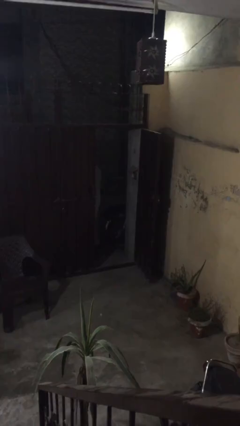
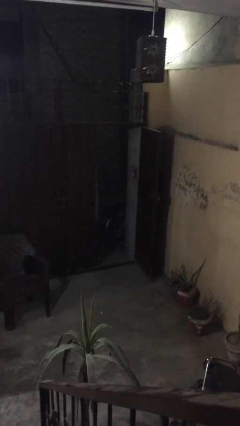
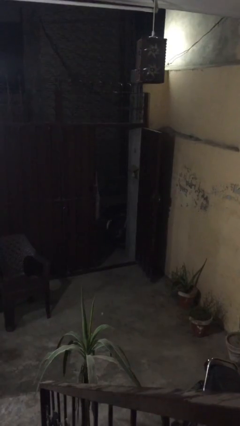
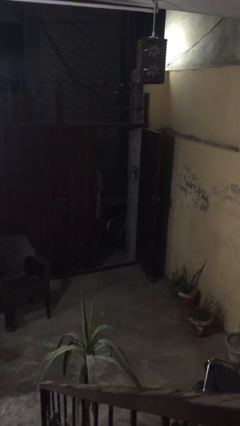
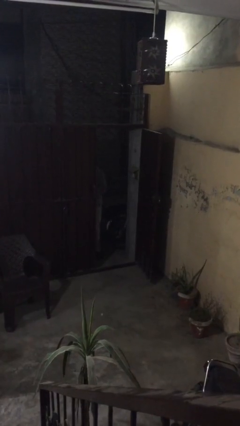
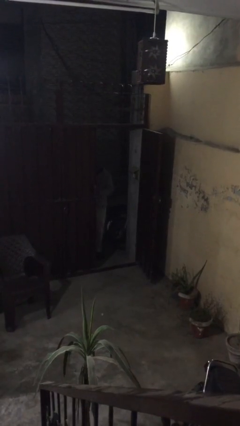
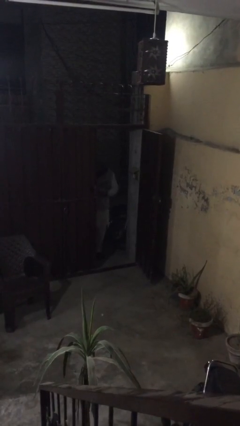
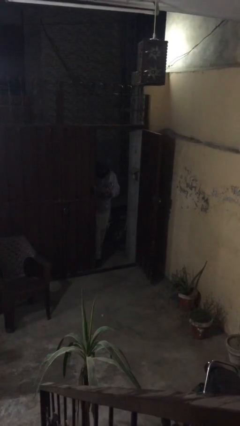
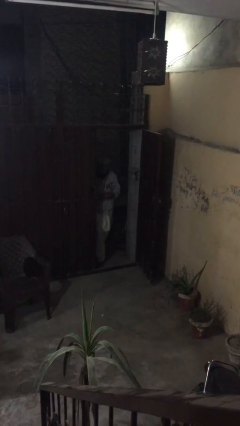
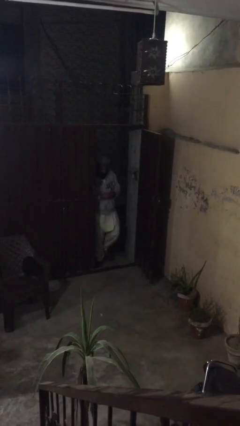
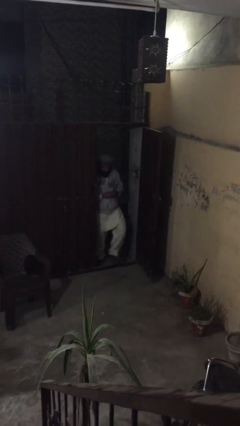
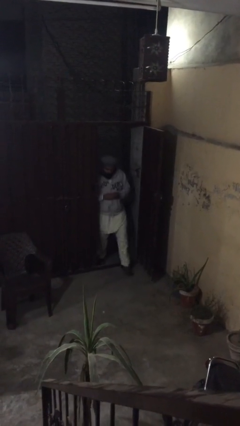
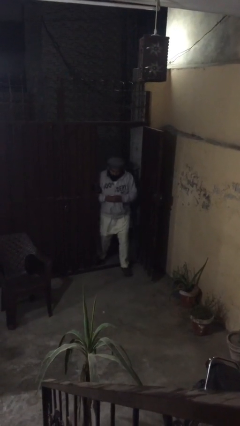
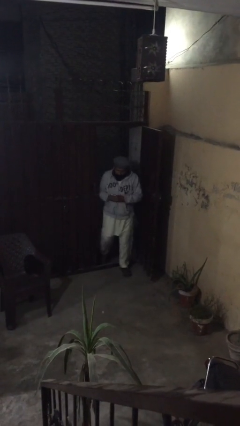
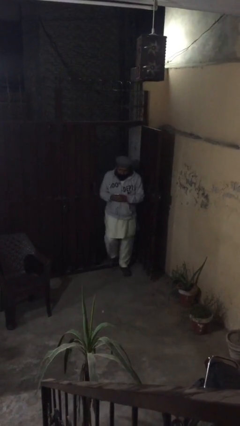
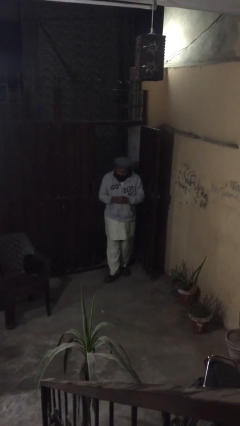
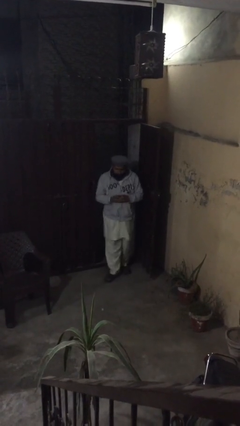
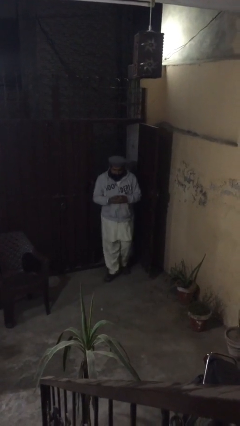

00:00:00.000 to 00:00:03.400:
person enters scene through structure

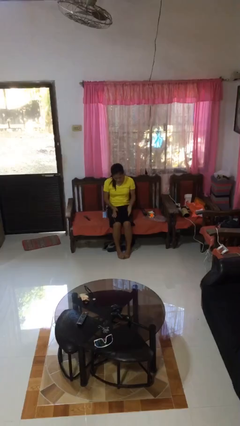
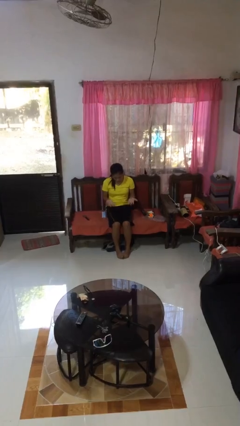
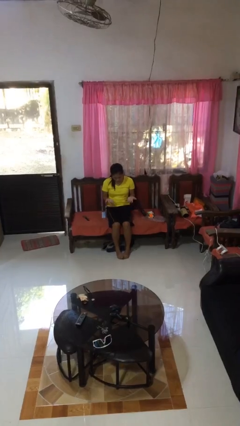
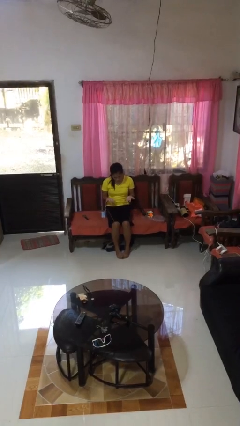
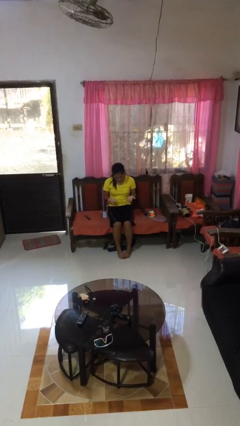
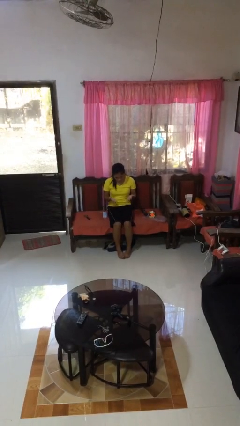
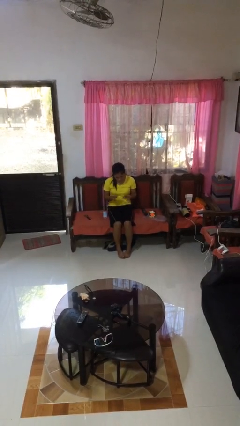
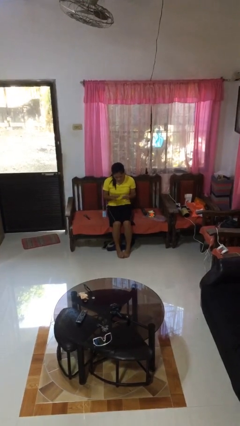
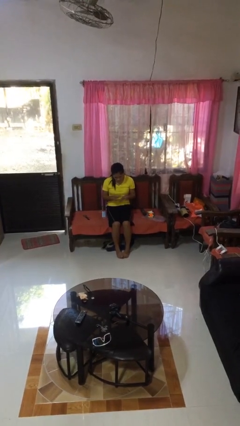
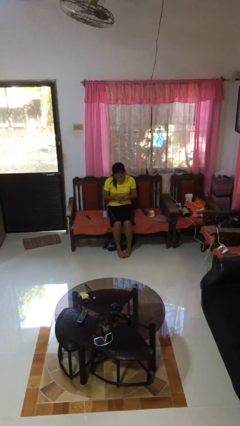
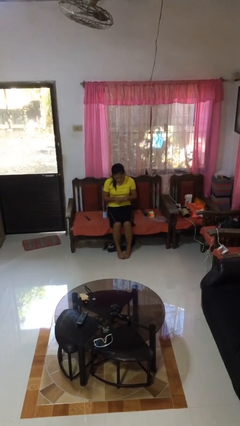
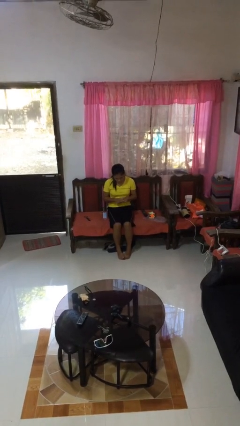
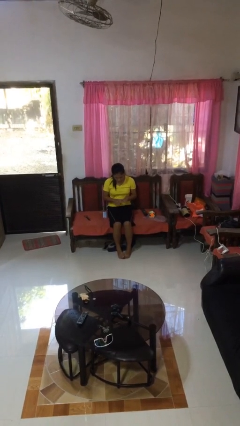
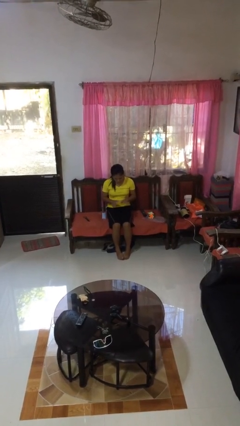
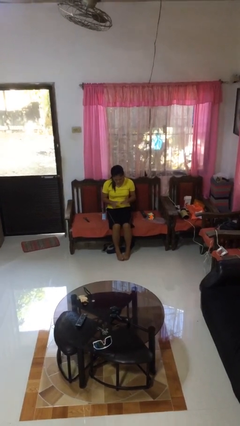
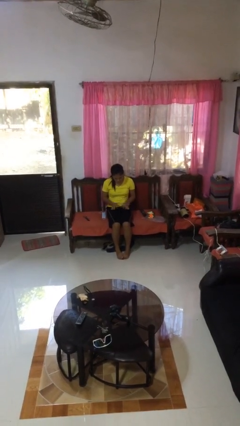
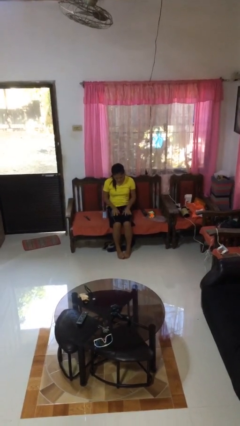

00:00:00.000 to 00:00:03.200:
person looks at hands in lap

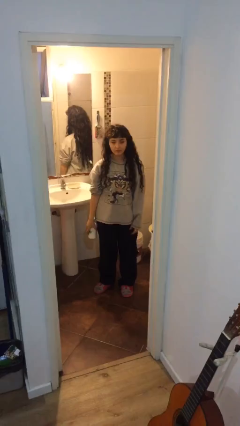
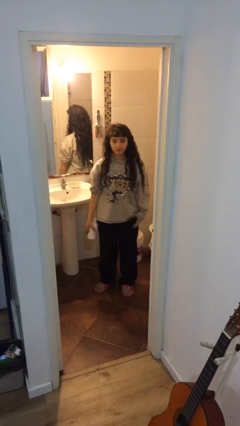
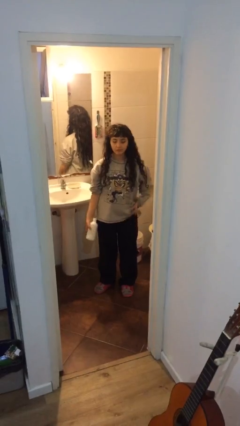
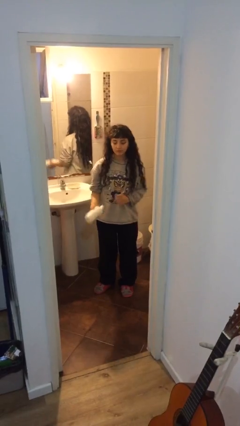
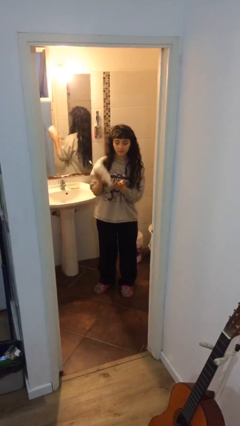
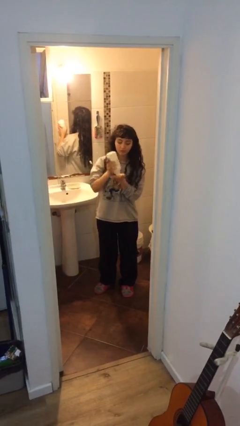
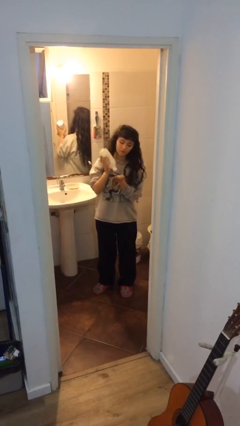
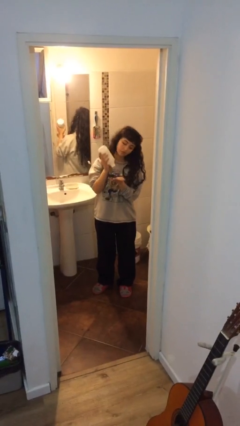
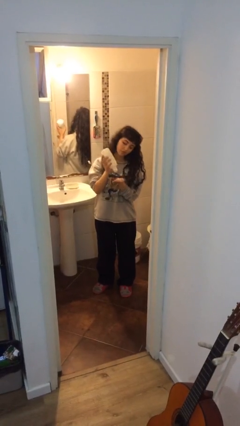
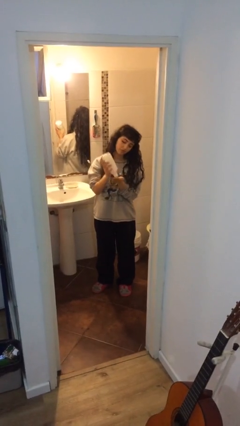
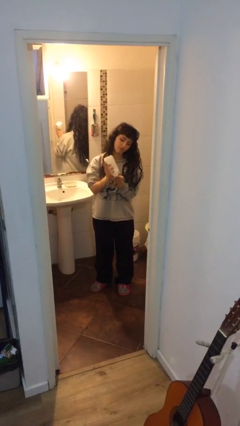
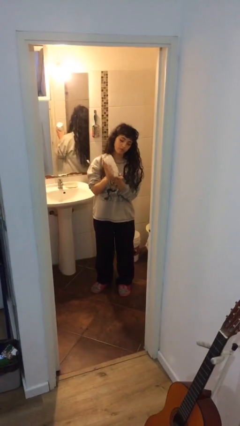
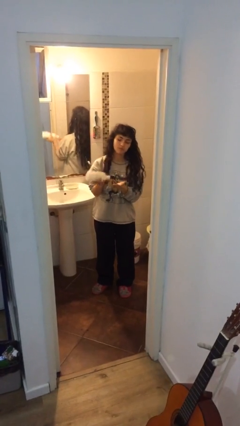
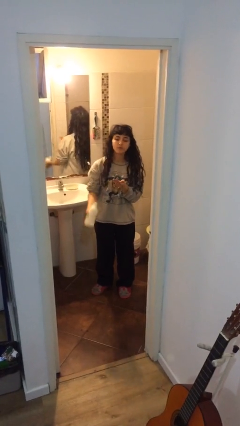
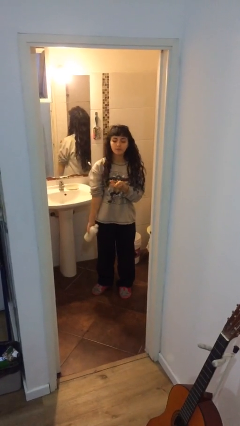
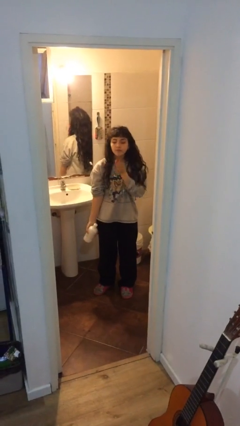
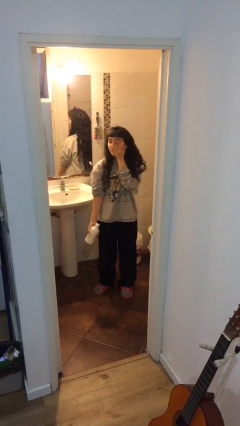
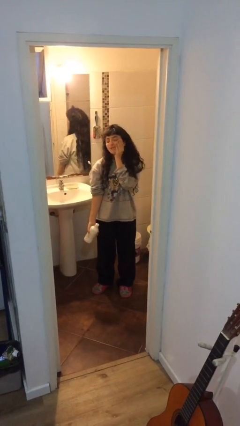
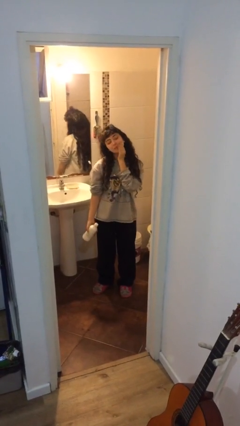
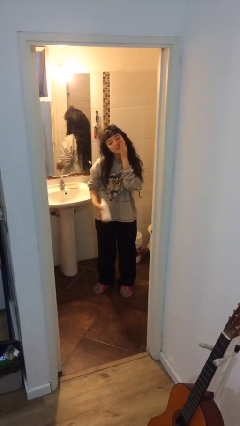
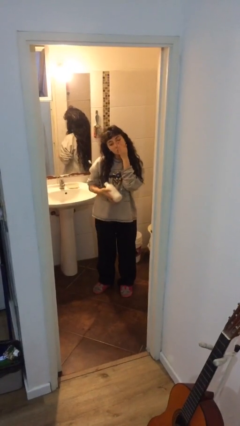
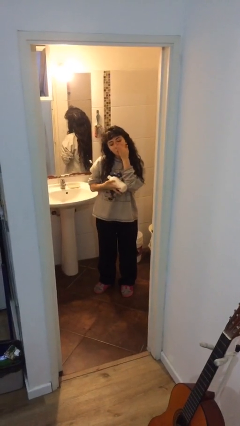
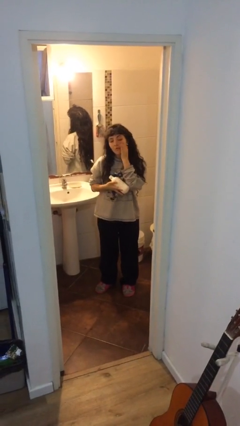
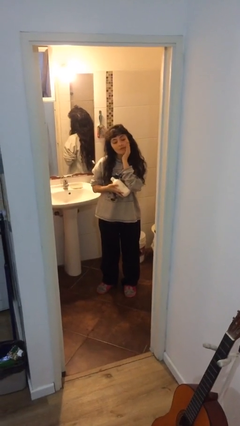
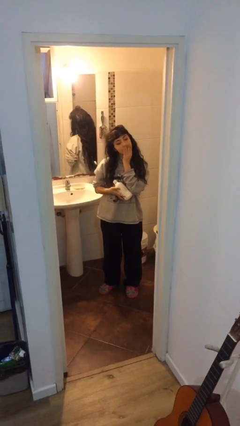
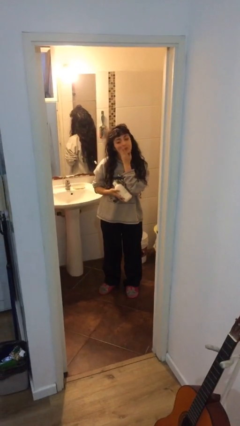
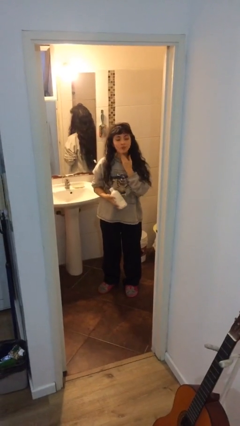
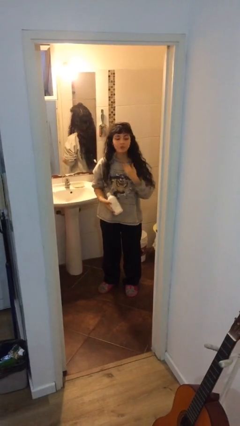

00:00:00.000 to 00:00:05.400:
person applies sunscreen

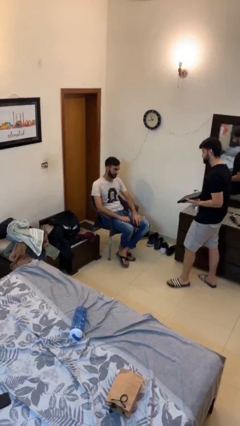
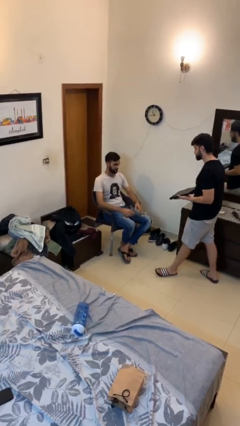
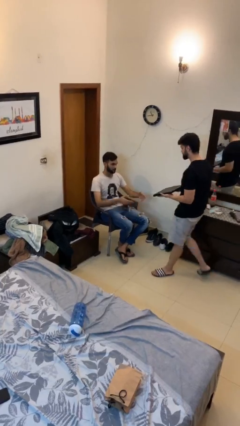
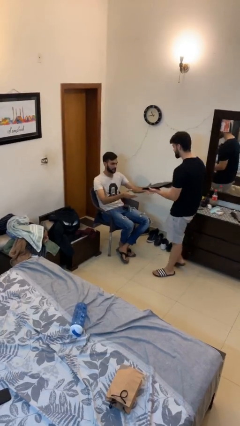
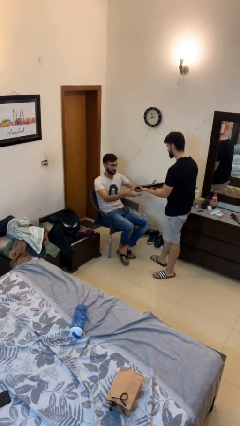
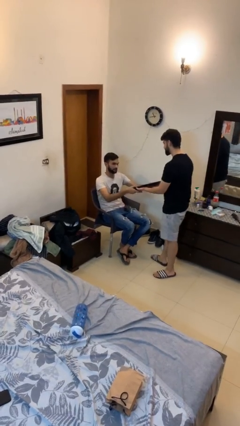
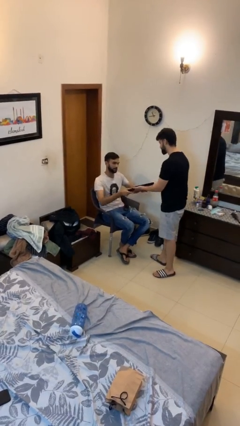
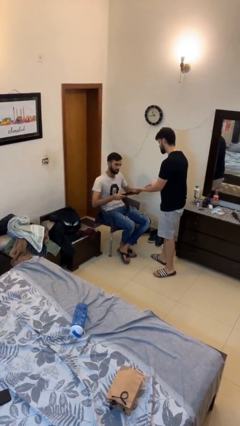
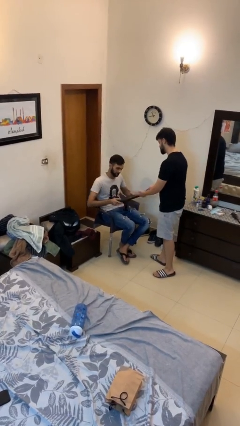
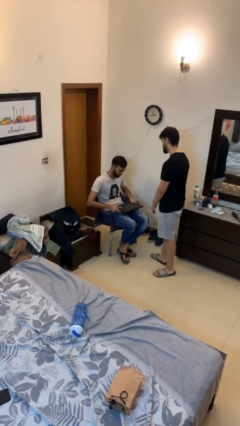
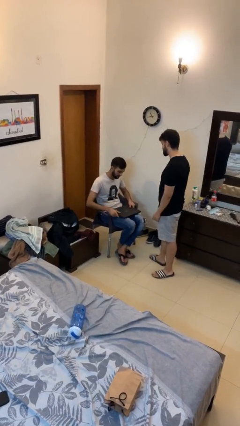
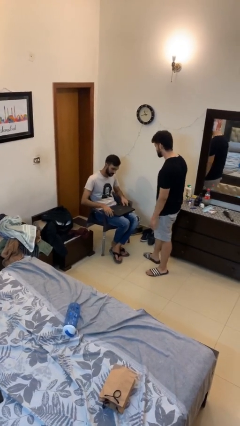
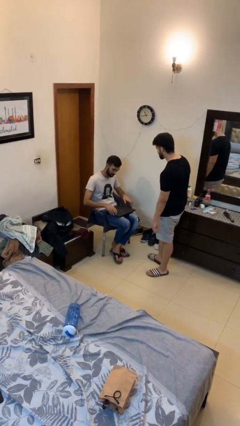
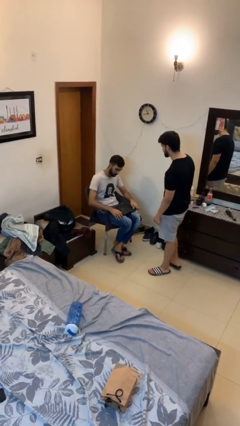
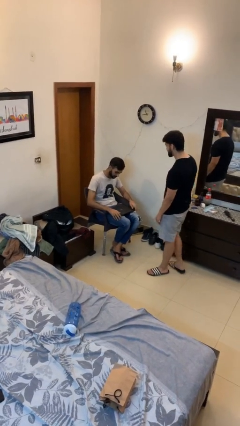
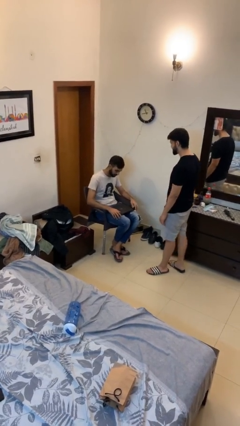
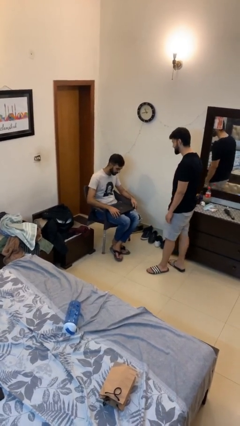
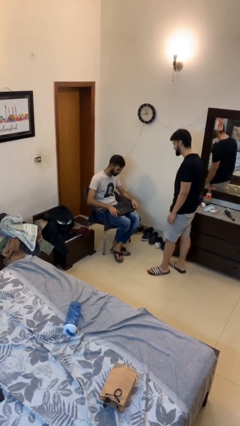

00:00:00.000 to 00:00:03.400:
person transfers object to person

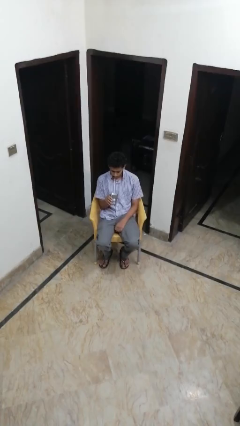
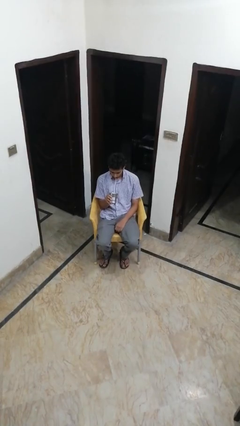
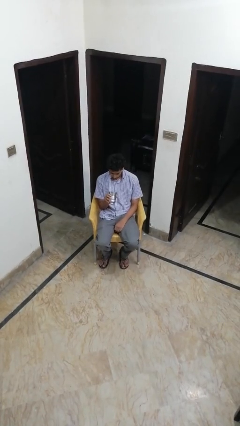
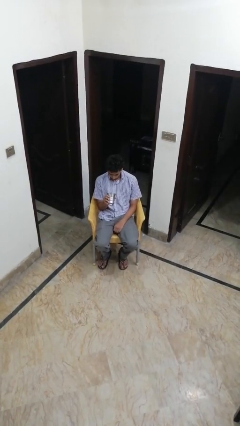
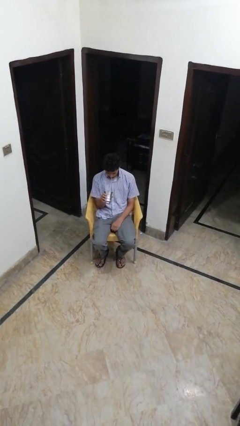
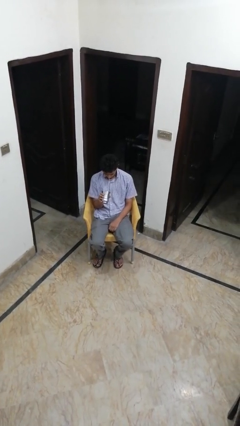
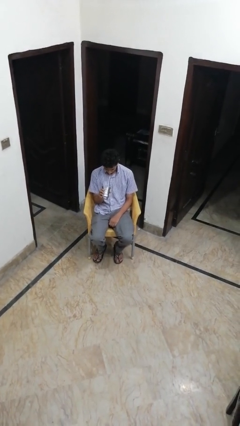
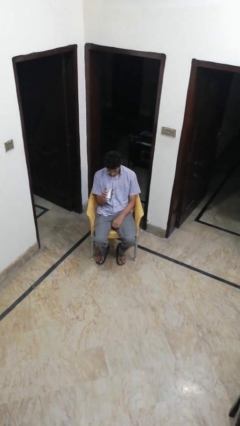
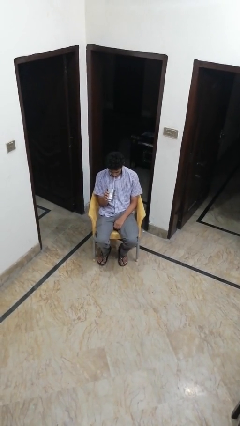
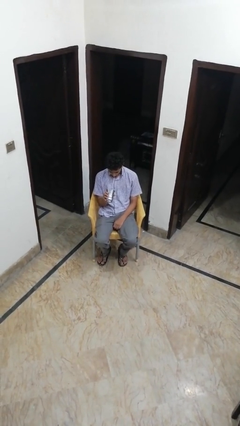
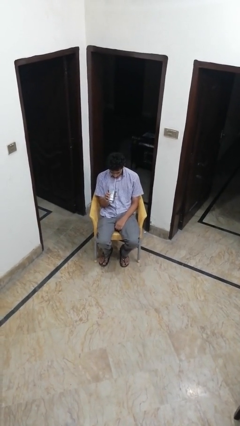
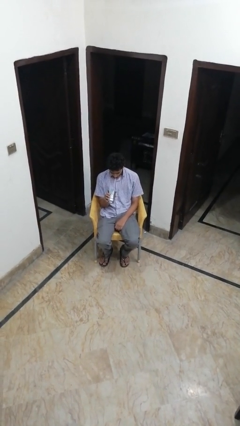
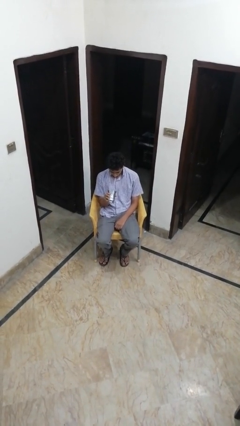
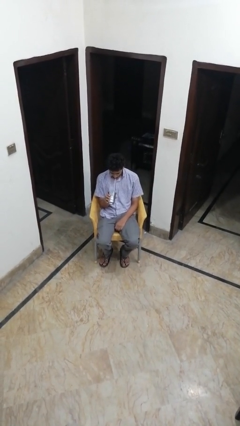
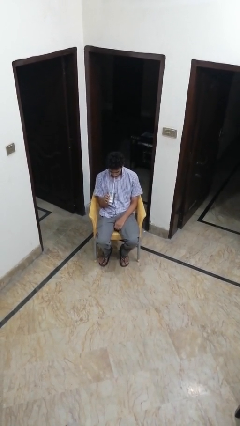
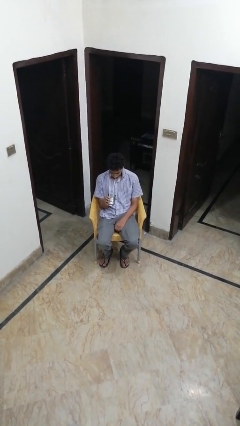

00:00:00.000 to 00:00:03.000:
person drinks from straw
